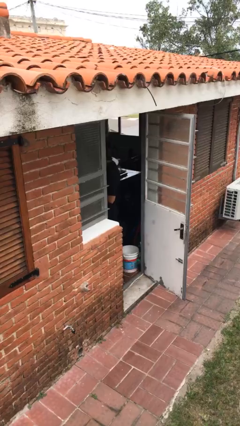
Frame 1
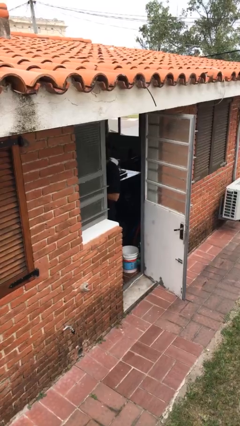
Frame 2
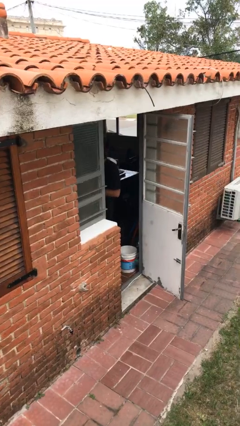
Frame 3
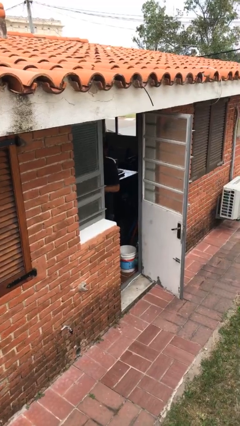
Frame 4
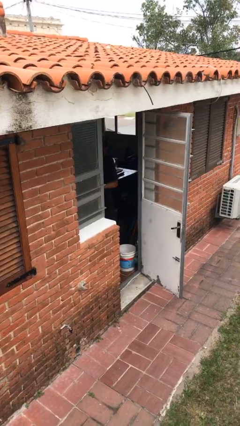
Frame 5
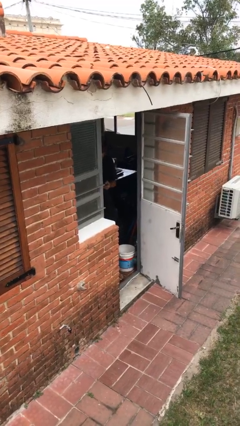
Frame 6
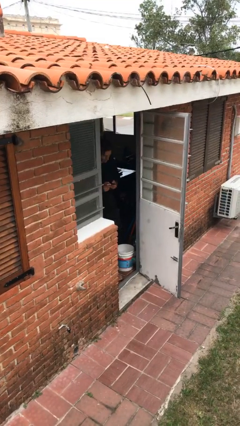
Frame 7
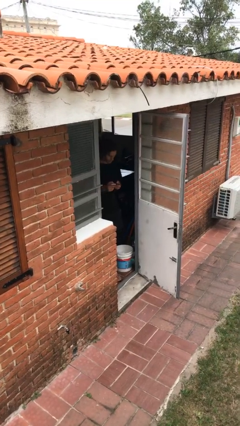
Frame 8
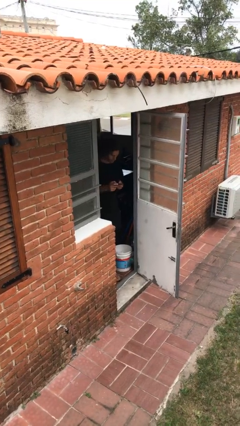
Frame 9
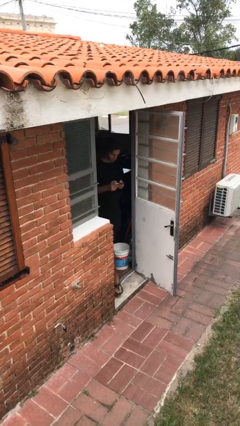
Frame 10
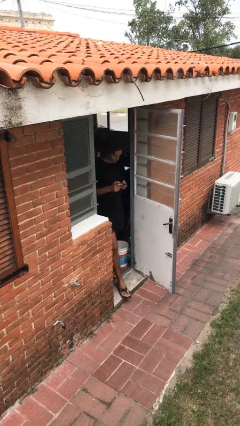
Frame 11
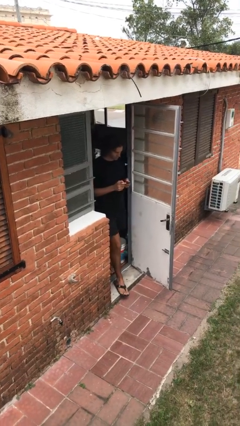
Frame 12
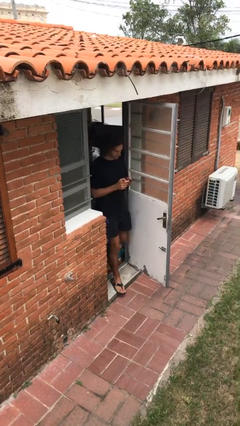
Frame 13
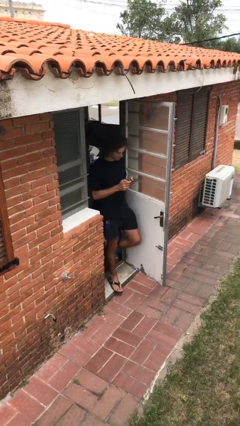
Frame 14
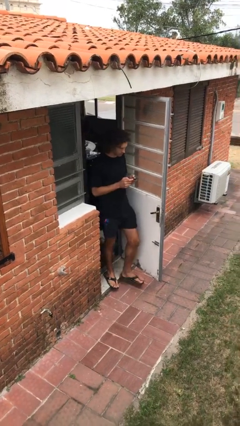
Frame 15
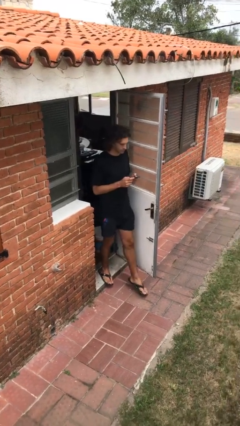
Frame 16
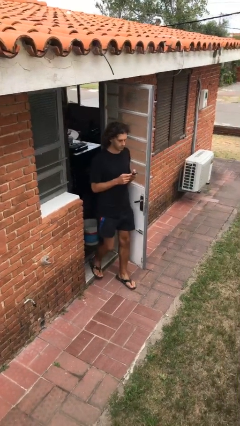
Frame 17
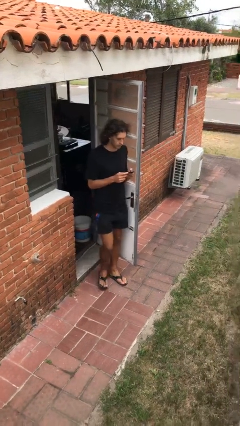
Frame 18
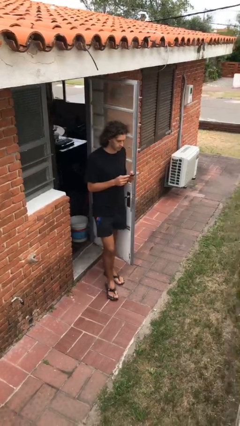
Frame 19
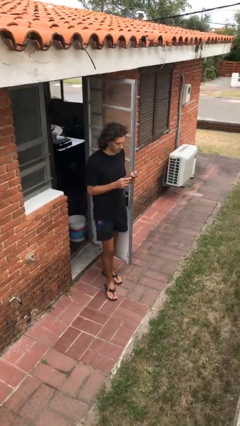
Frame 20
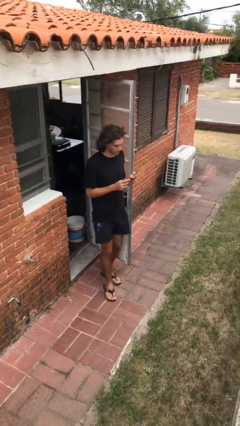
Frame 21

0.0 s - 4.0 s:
person enters scene through structure

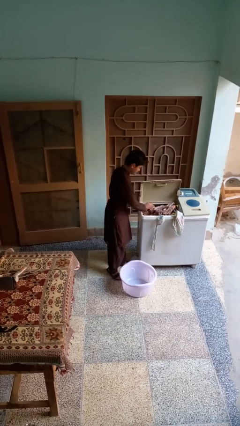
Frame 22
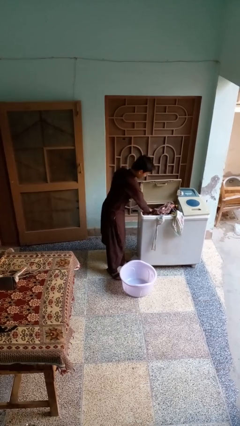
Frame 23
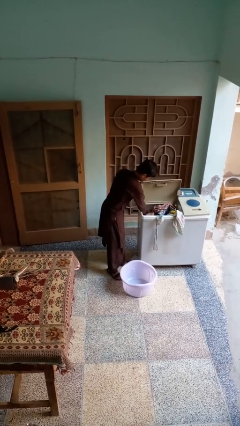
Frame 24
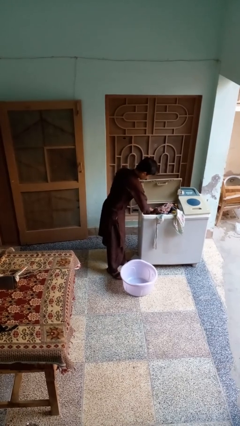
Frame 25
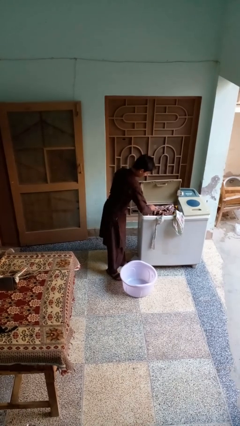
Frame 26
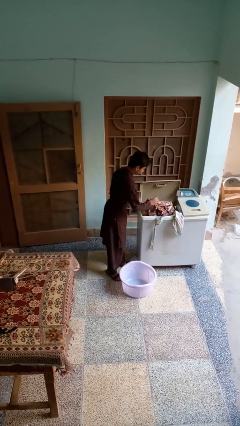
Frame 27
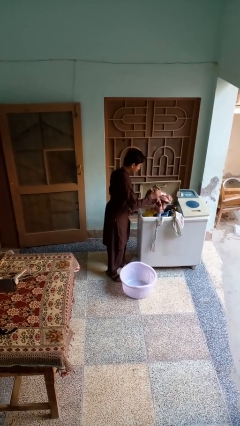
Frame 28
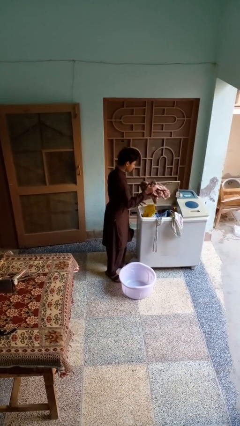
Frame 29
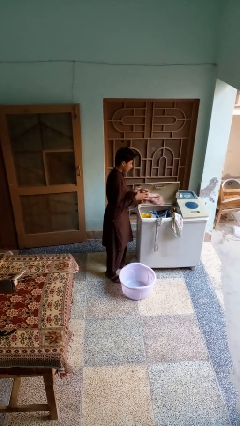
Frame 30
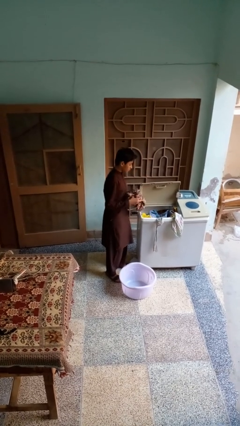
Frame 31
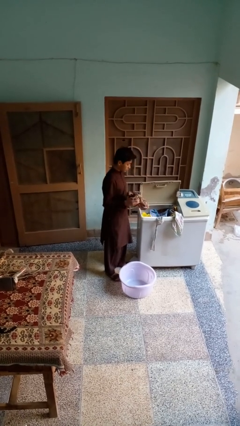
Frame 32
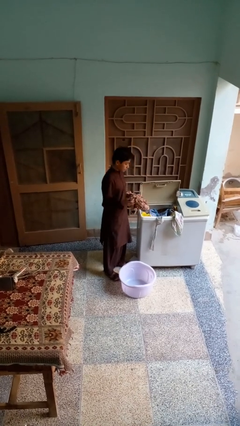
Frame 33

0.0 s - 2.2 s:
person loads clotheswasher

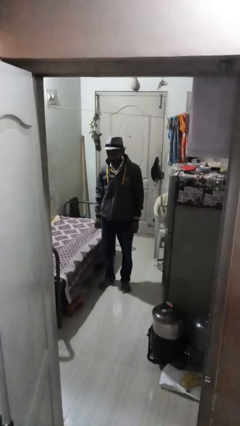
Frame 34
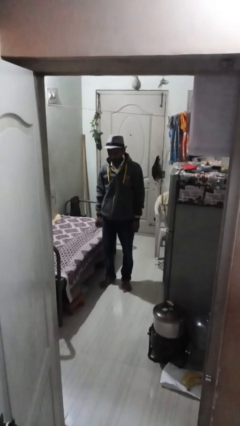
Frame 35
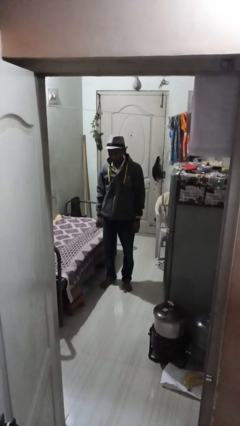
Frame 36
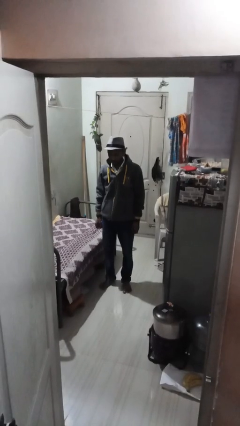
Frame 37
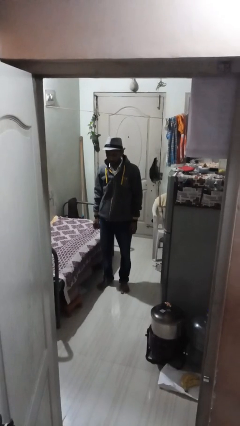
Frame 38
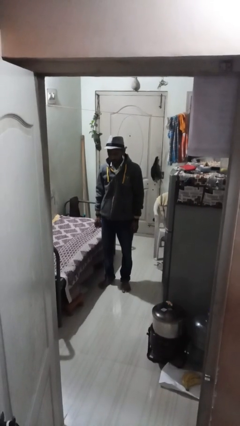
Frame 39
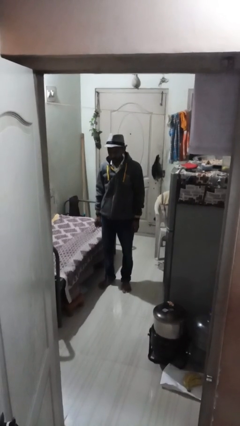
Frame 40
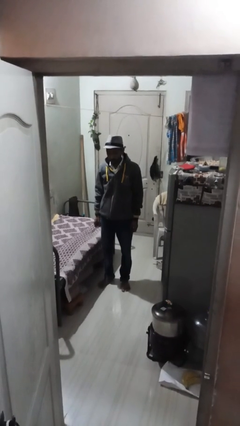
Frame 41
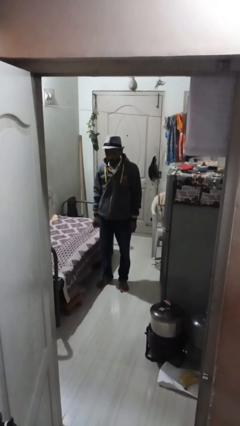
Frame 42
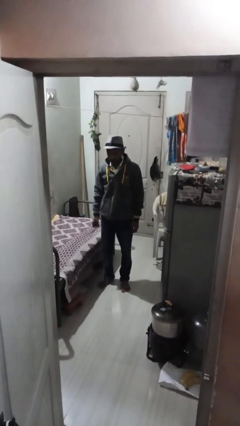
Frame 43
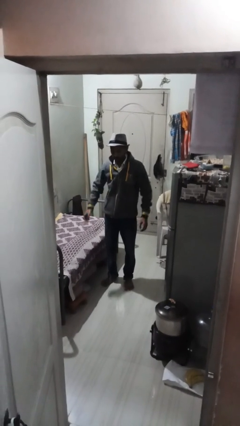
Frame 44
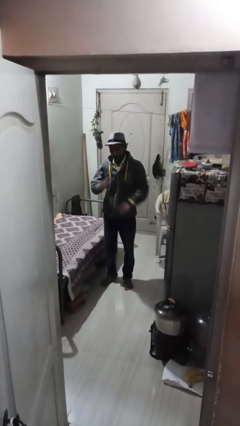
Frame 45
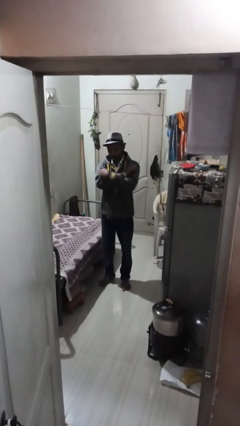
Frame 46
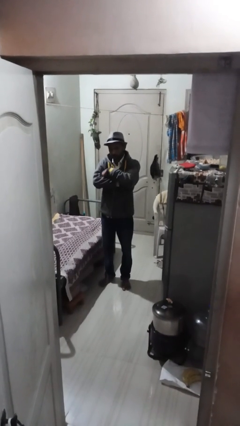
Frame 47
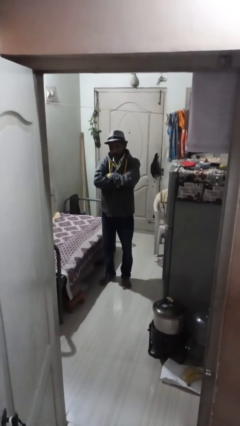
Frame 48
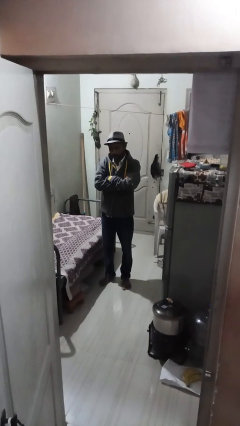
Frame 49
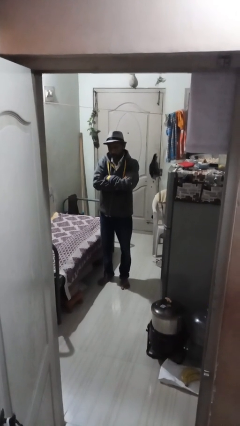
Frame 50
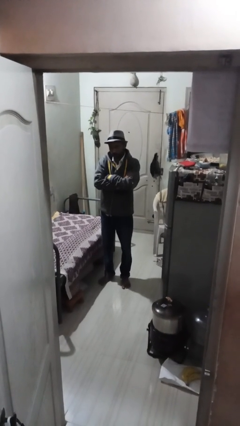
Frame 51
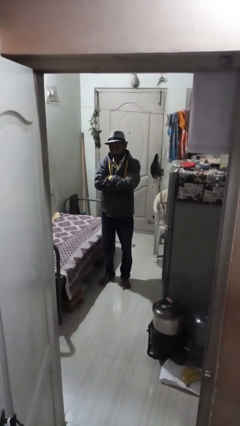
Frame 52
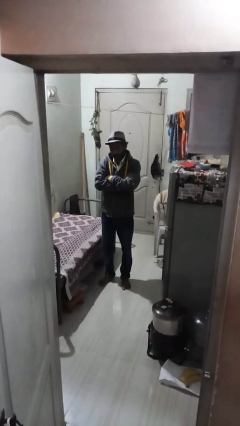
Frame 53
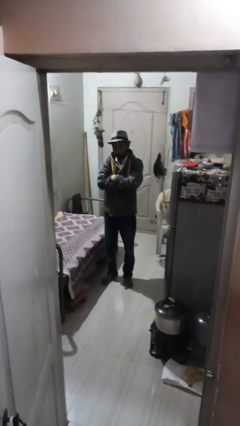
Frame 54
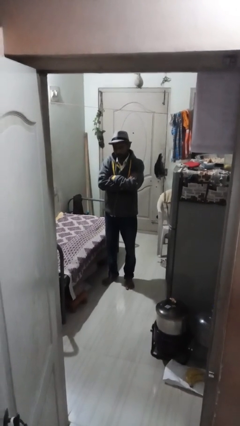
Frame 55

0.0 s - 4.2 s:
person crosses arms

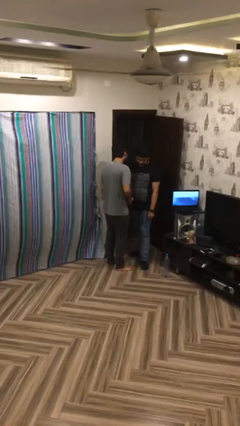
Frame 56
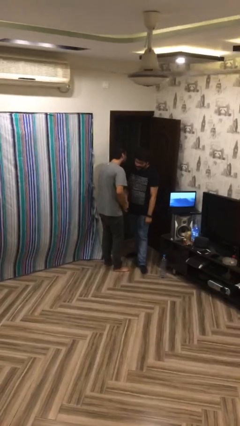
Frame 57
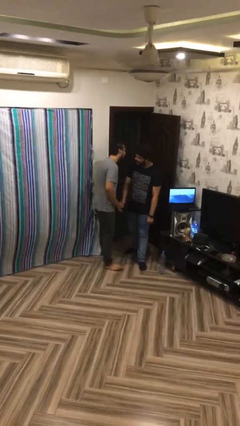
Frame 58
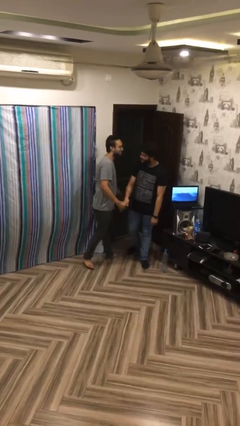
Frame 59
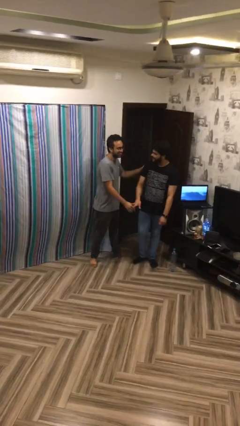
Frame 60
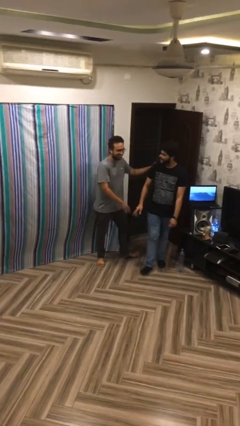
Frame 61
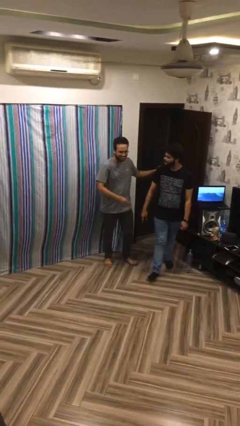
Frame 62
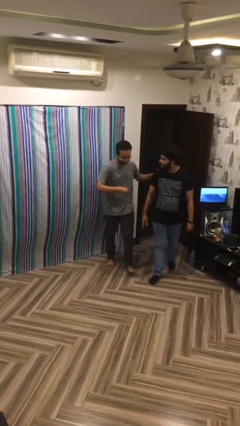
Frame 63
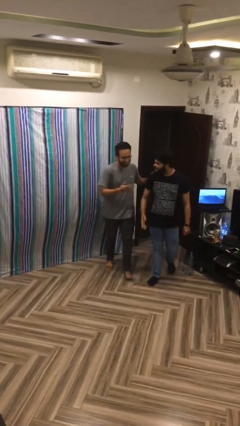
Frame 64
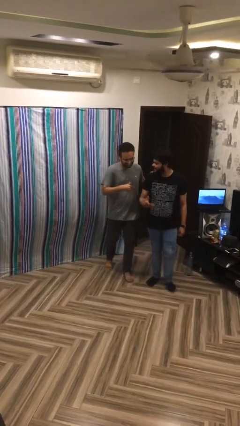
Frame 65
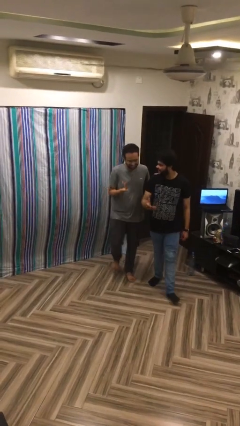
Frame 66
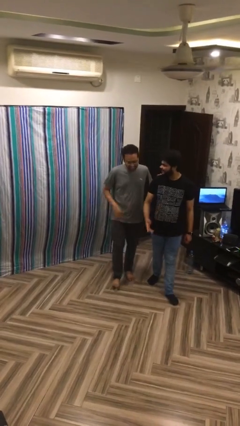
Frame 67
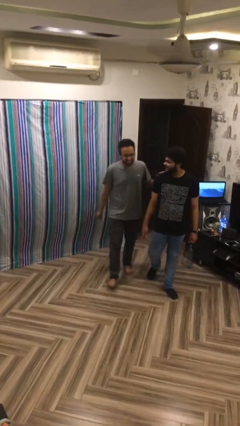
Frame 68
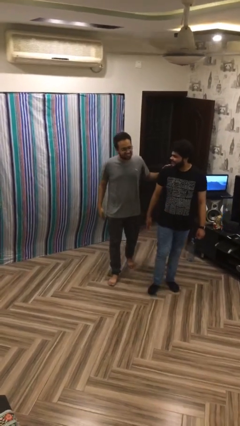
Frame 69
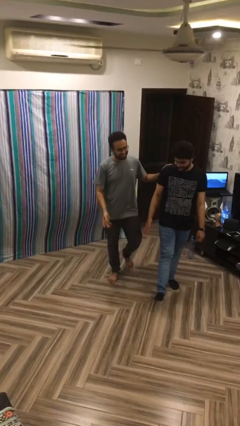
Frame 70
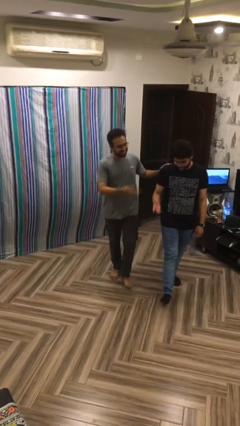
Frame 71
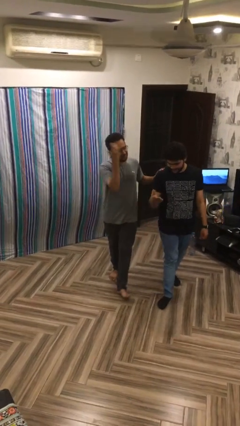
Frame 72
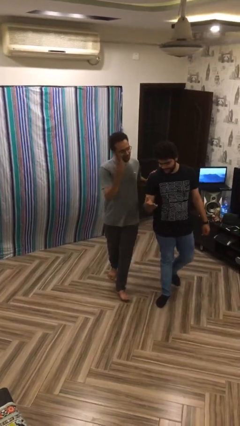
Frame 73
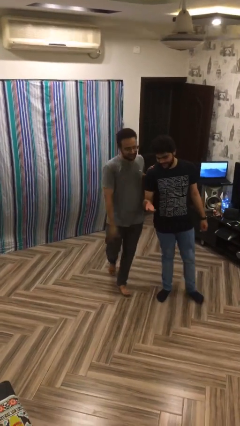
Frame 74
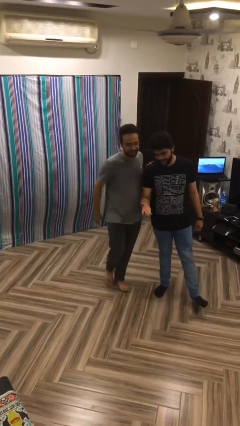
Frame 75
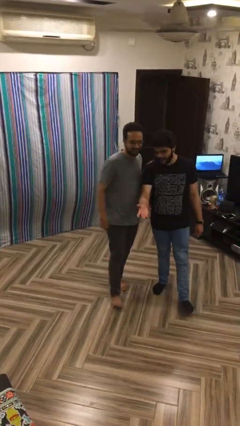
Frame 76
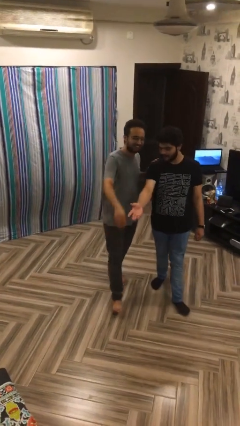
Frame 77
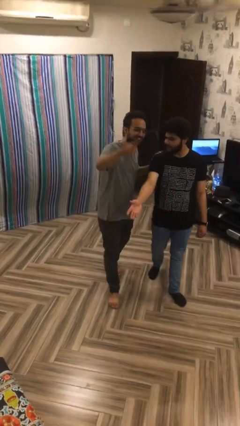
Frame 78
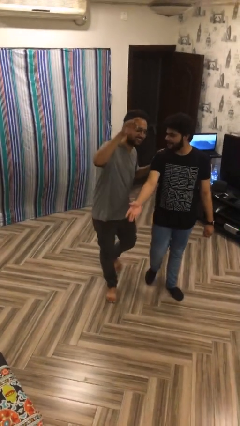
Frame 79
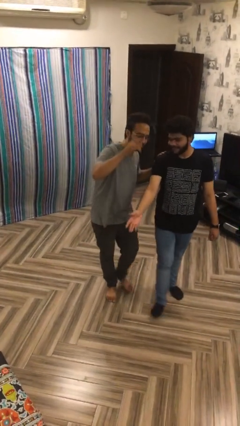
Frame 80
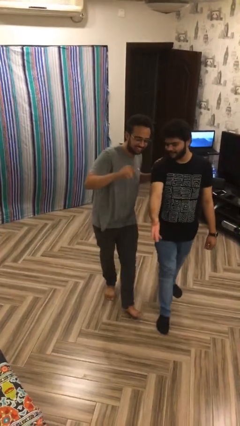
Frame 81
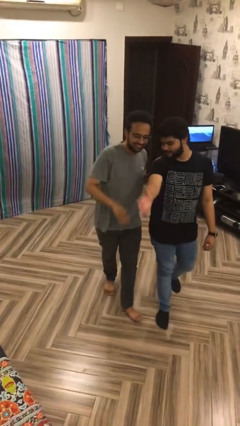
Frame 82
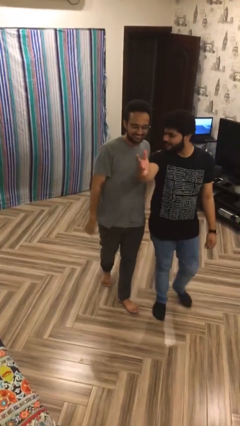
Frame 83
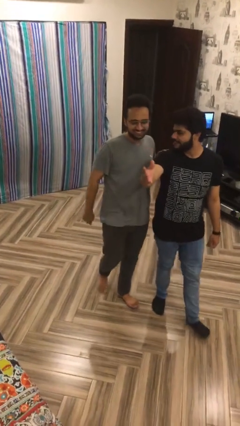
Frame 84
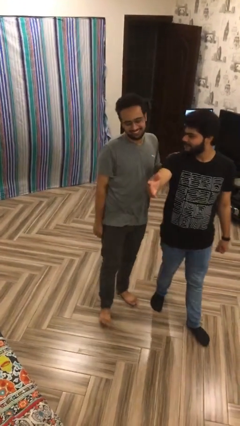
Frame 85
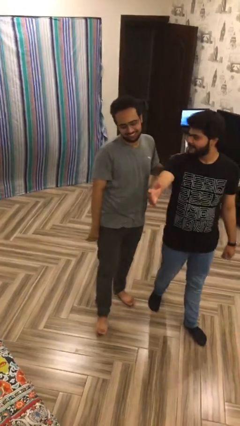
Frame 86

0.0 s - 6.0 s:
person talks to person

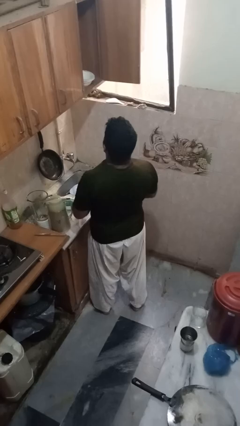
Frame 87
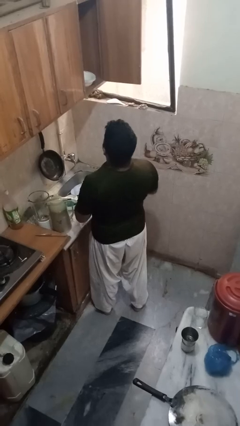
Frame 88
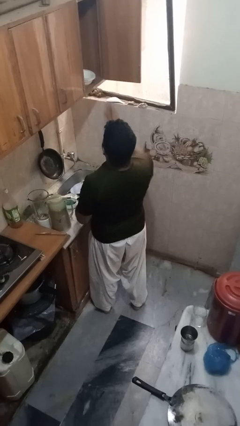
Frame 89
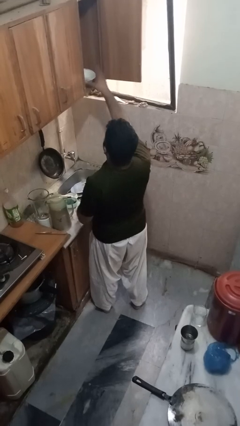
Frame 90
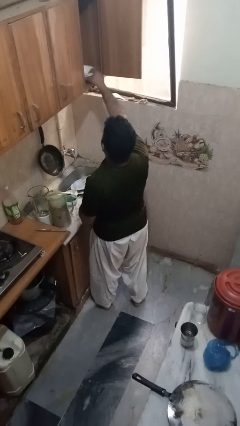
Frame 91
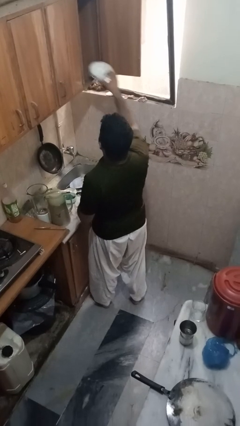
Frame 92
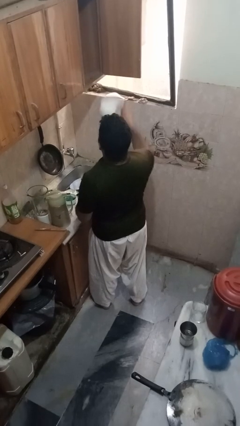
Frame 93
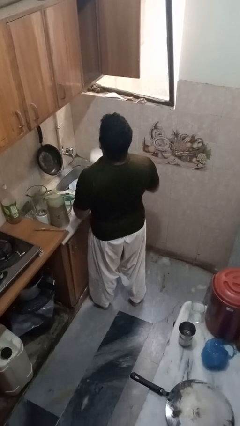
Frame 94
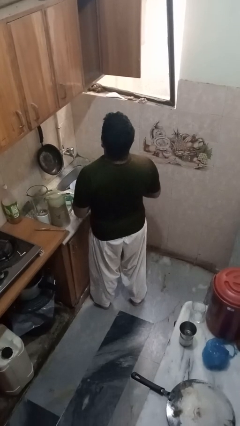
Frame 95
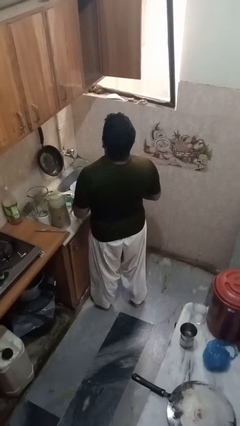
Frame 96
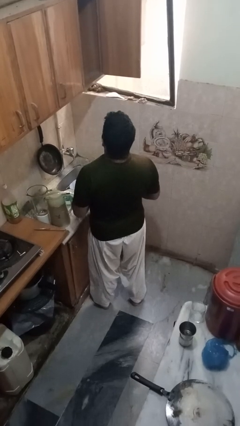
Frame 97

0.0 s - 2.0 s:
person takes object from cabinet
